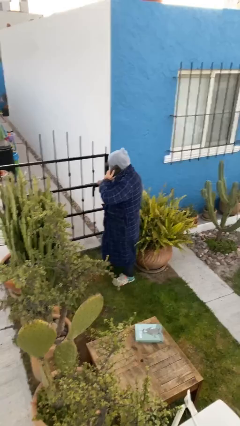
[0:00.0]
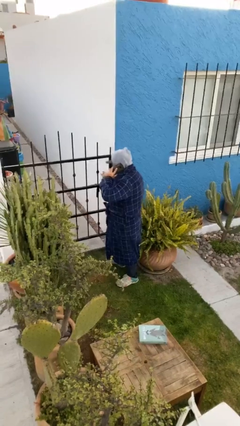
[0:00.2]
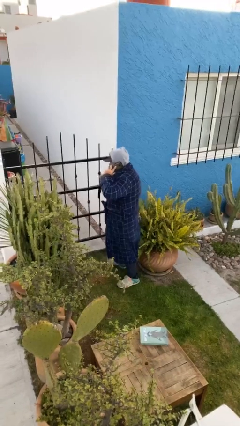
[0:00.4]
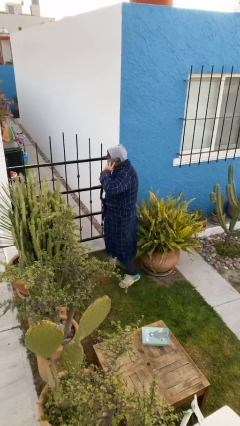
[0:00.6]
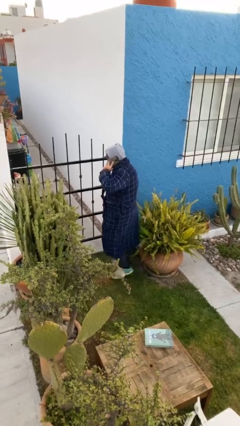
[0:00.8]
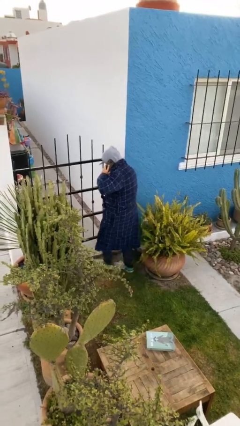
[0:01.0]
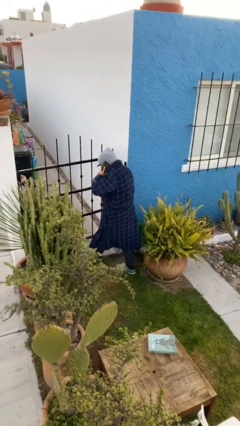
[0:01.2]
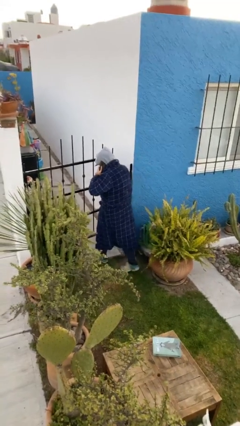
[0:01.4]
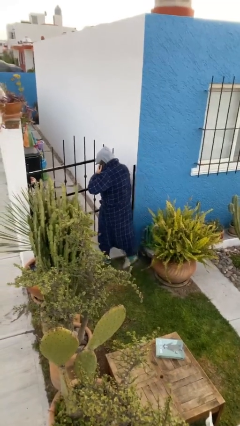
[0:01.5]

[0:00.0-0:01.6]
person opens facility door

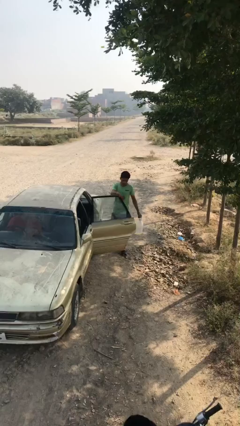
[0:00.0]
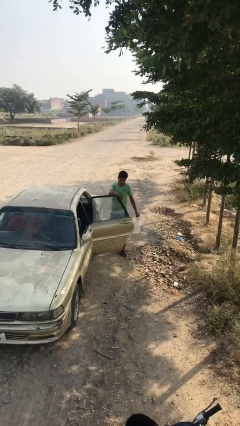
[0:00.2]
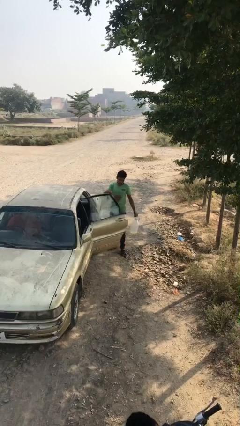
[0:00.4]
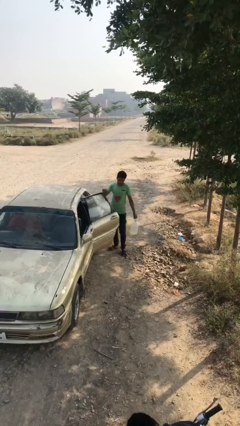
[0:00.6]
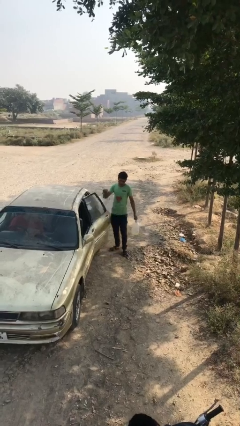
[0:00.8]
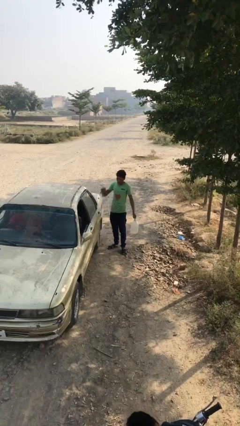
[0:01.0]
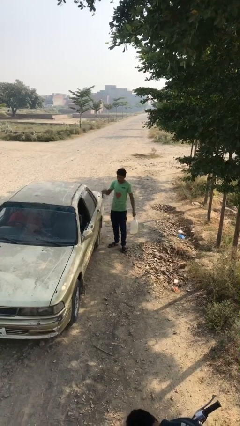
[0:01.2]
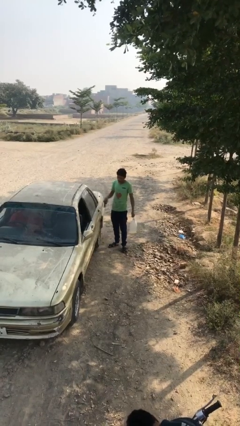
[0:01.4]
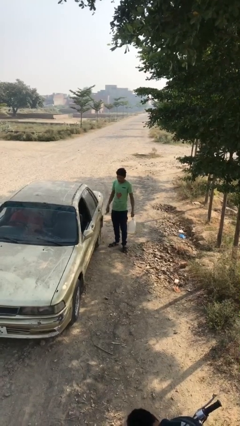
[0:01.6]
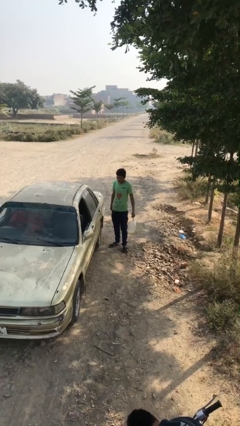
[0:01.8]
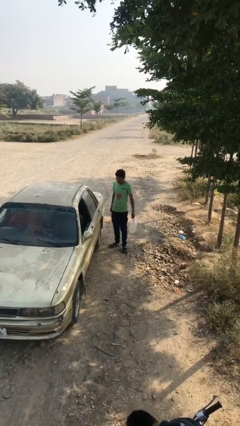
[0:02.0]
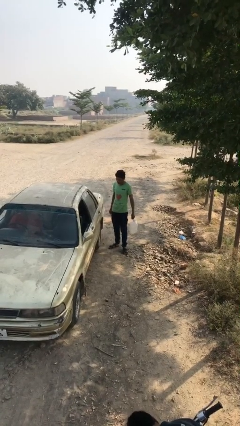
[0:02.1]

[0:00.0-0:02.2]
person closes car door

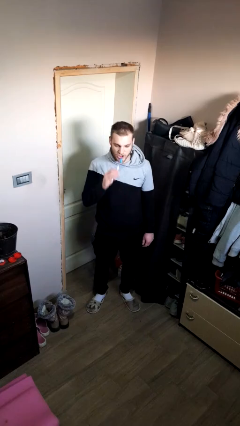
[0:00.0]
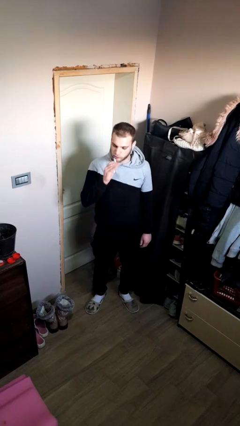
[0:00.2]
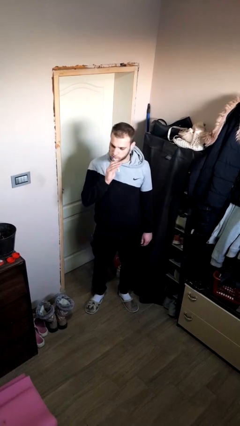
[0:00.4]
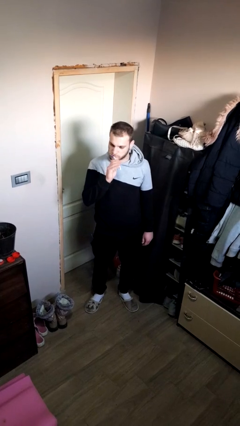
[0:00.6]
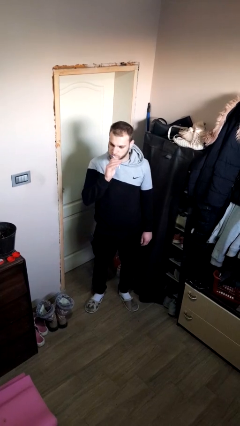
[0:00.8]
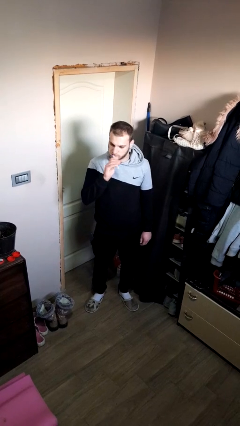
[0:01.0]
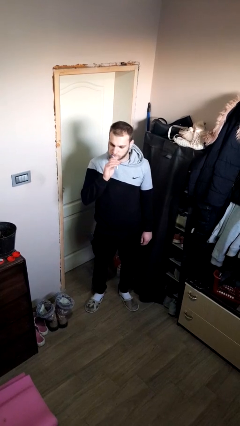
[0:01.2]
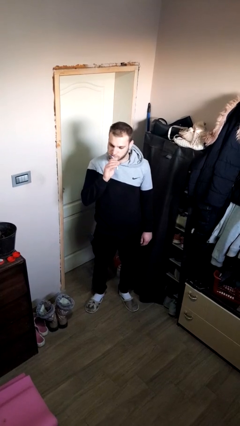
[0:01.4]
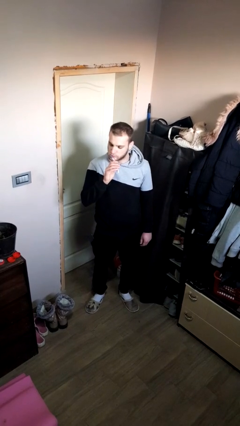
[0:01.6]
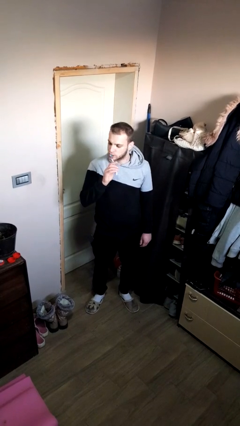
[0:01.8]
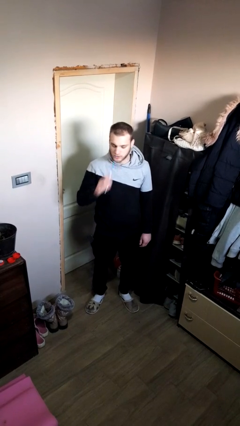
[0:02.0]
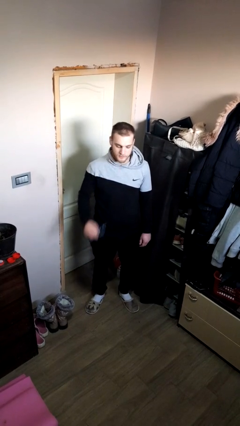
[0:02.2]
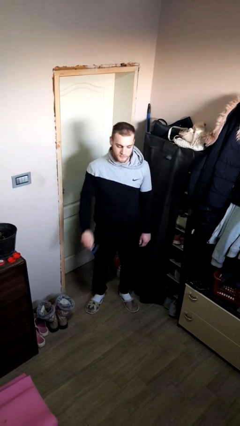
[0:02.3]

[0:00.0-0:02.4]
person brushes teeth

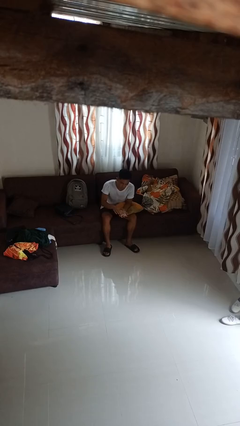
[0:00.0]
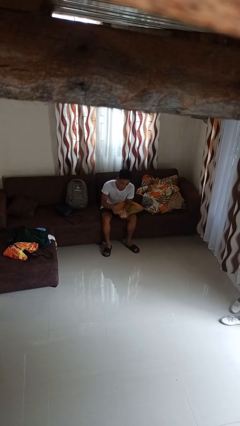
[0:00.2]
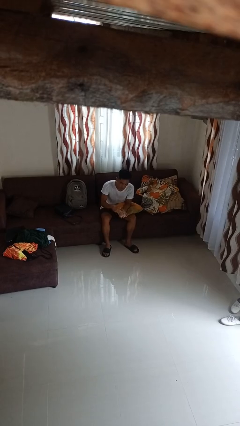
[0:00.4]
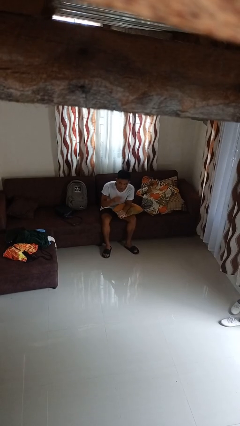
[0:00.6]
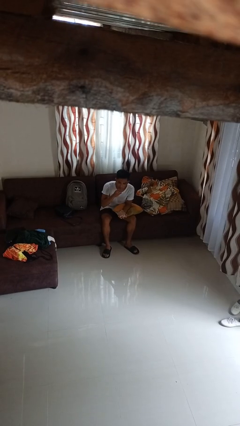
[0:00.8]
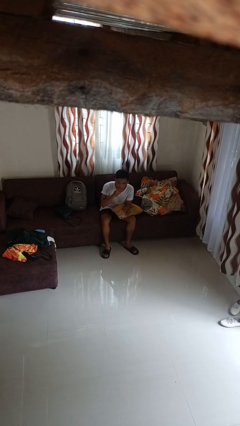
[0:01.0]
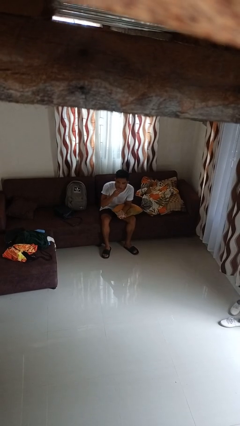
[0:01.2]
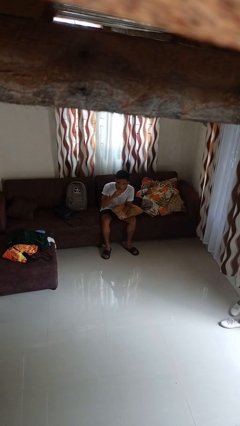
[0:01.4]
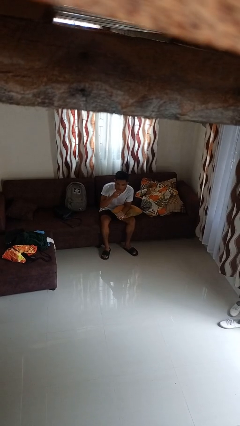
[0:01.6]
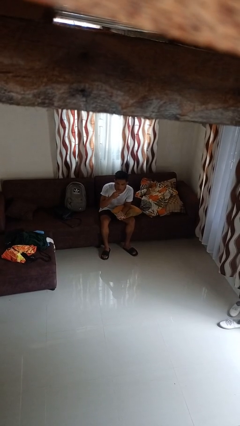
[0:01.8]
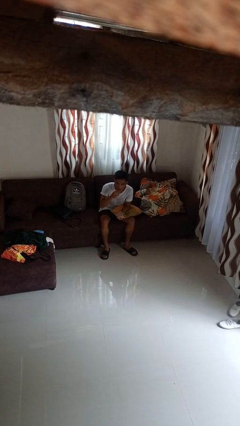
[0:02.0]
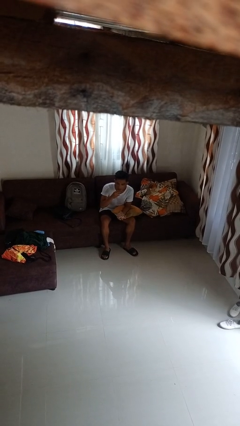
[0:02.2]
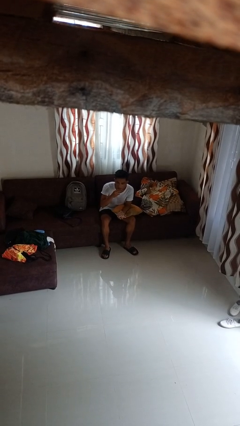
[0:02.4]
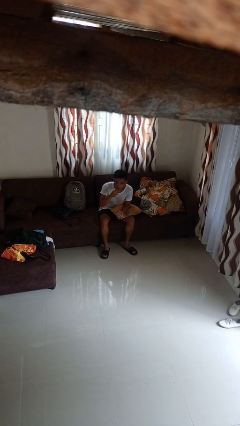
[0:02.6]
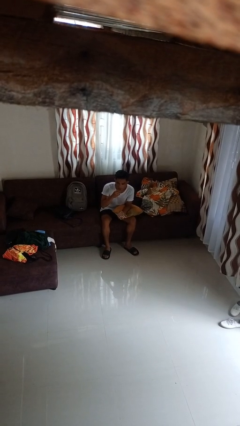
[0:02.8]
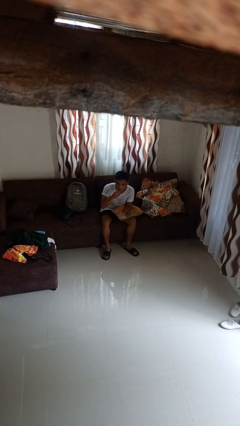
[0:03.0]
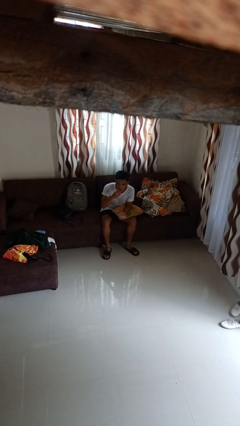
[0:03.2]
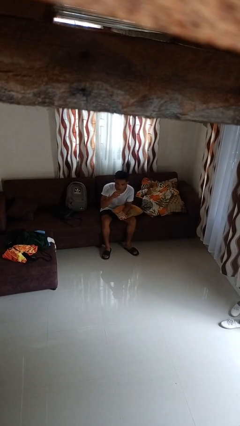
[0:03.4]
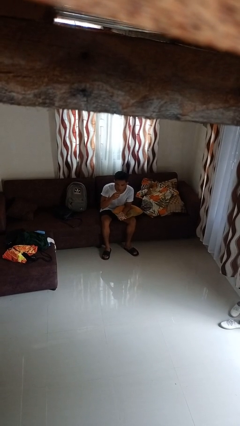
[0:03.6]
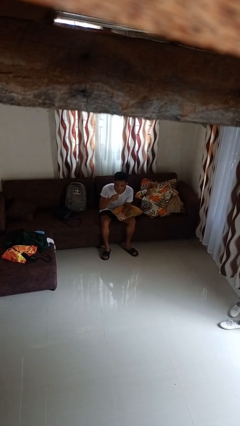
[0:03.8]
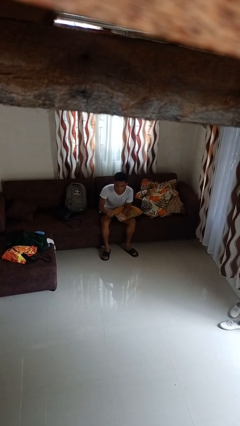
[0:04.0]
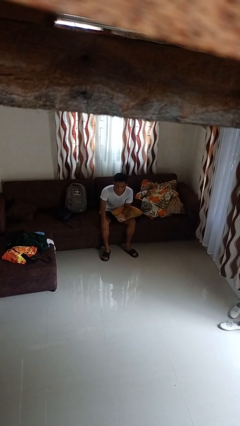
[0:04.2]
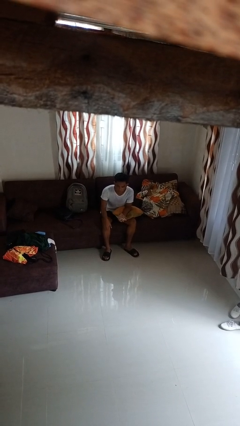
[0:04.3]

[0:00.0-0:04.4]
person eats snack from bag

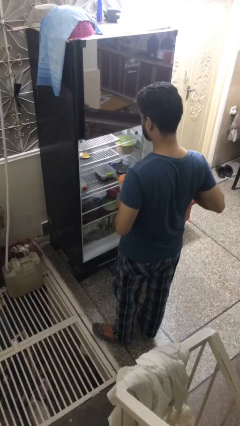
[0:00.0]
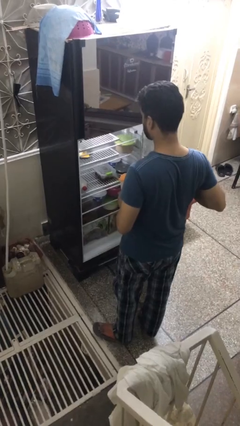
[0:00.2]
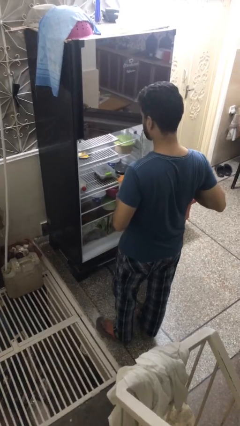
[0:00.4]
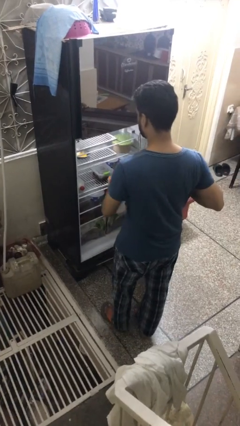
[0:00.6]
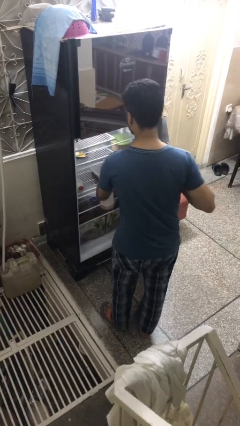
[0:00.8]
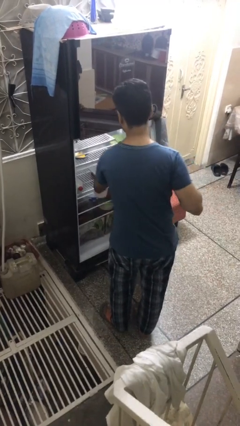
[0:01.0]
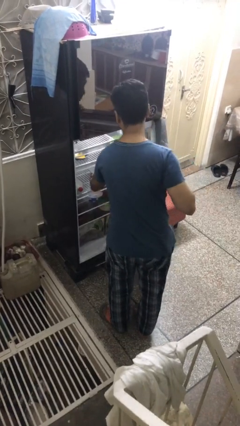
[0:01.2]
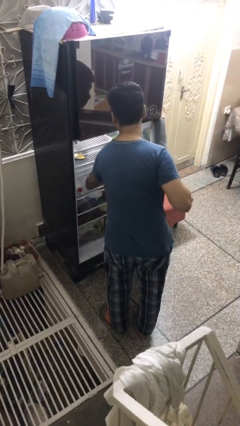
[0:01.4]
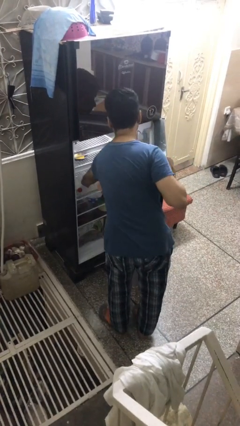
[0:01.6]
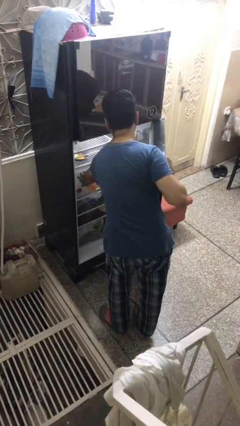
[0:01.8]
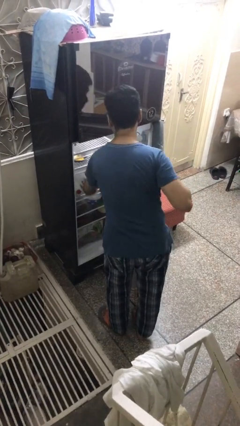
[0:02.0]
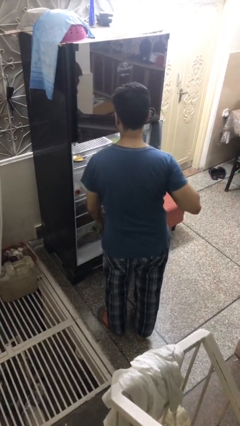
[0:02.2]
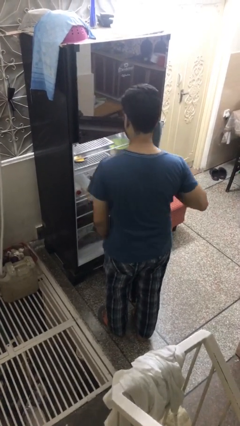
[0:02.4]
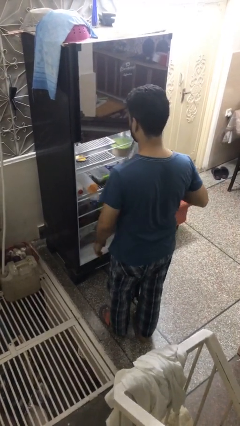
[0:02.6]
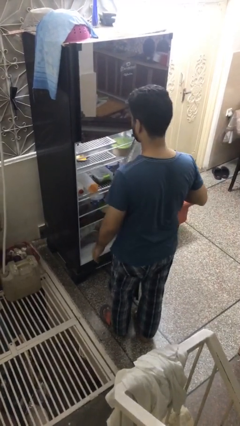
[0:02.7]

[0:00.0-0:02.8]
person puts object into refrigerator

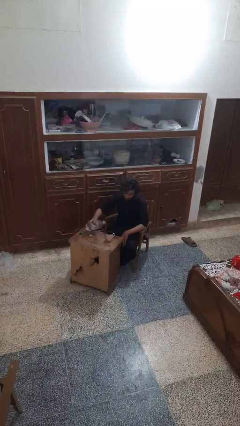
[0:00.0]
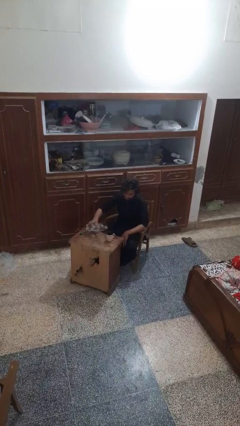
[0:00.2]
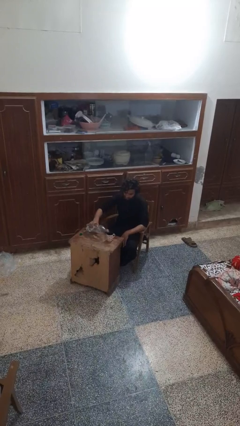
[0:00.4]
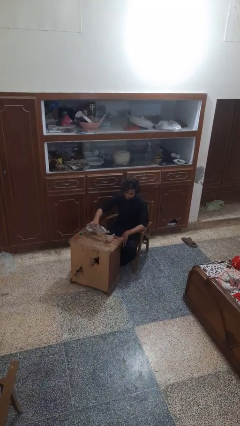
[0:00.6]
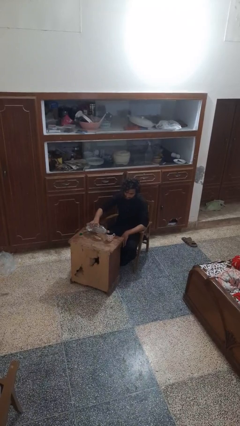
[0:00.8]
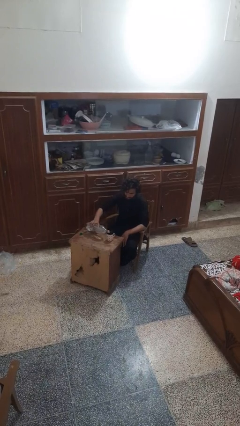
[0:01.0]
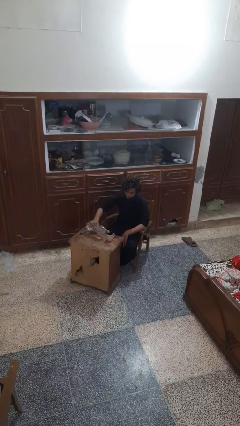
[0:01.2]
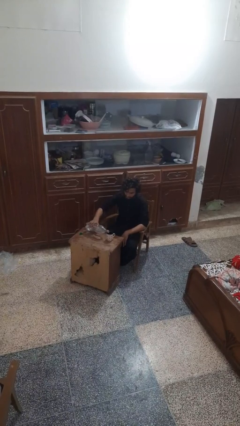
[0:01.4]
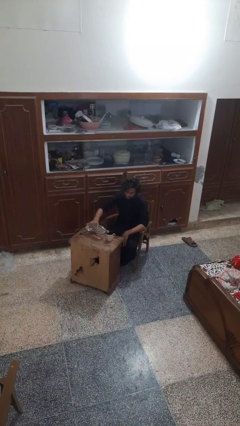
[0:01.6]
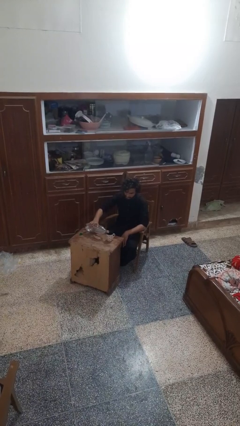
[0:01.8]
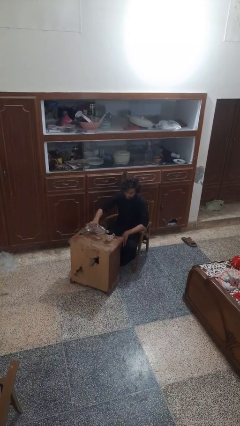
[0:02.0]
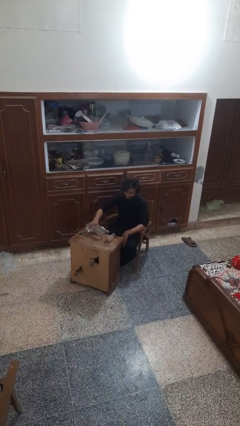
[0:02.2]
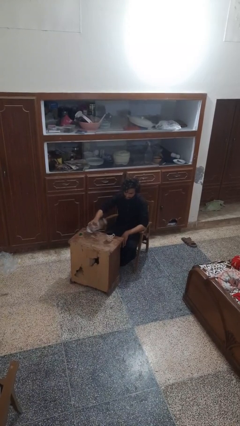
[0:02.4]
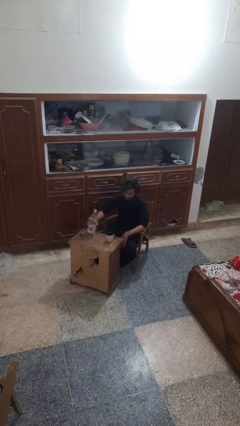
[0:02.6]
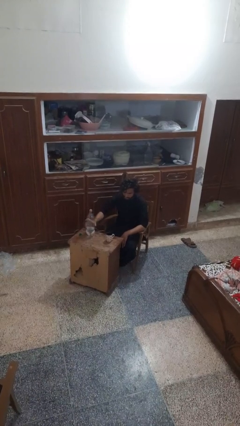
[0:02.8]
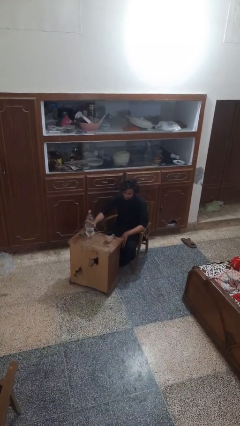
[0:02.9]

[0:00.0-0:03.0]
person pours liquid into cup

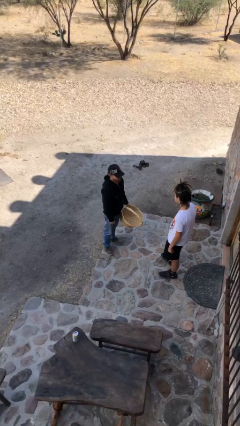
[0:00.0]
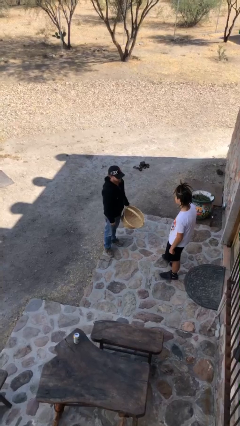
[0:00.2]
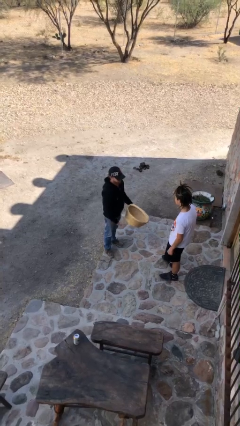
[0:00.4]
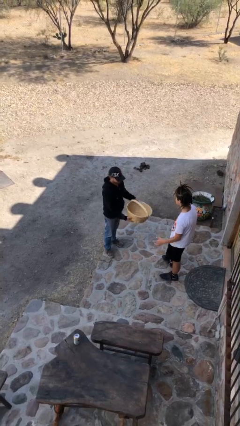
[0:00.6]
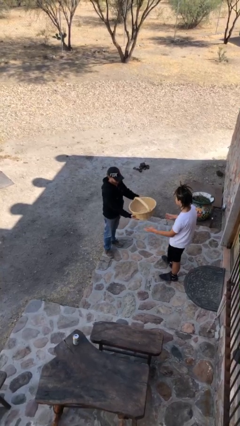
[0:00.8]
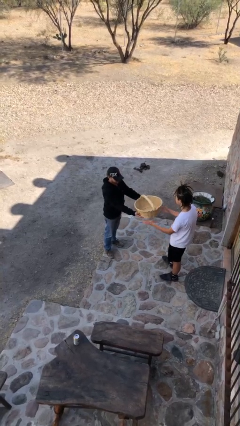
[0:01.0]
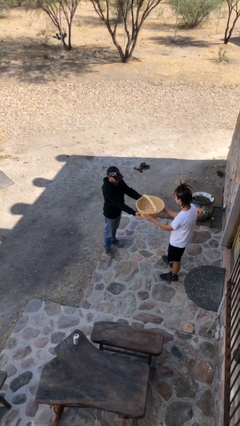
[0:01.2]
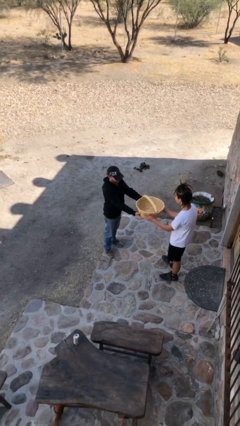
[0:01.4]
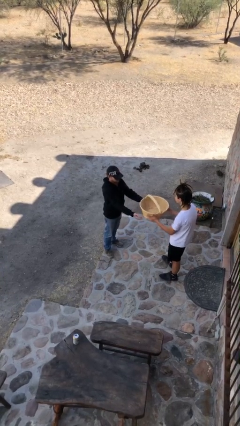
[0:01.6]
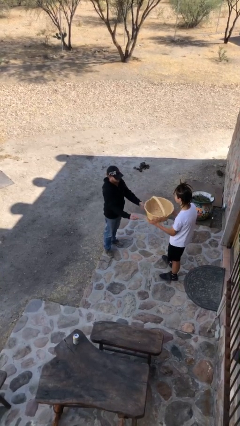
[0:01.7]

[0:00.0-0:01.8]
person transfers object to person
